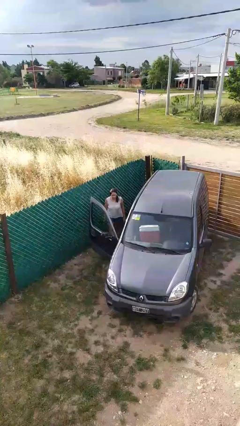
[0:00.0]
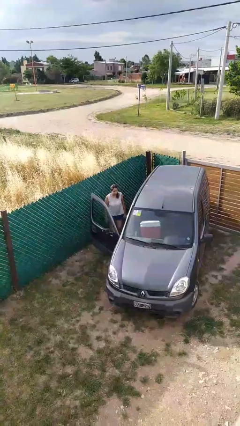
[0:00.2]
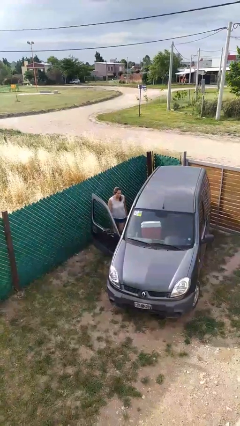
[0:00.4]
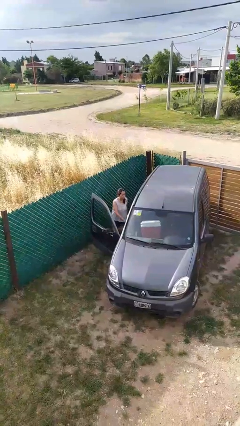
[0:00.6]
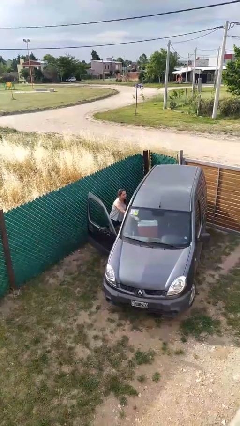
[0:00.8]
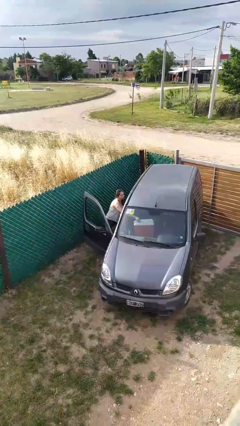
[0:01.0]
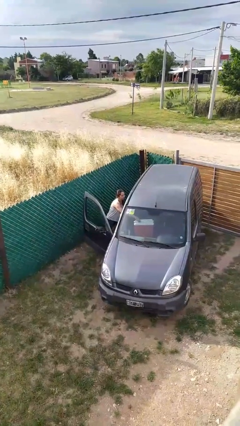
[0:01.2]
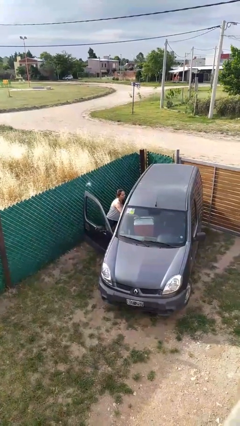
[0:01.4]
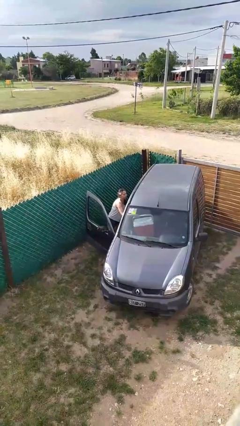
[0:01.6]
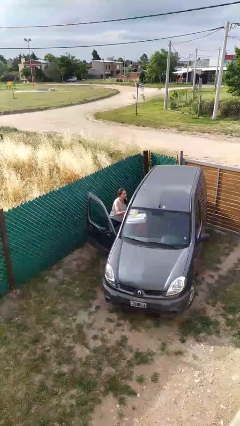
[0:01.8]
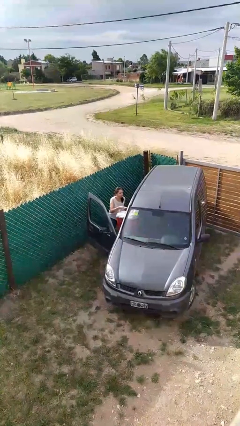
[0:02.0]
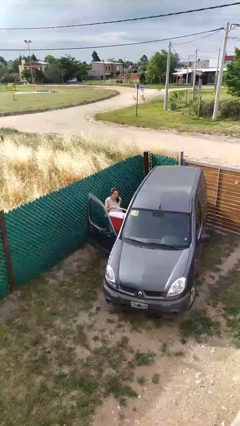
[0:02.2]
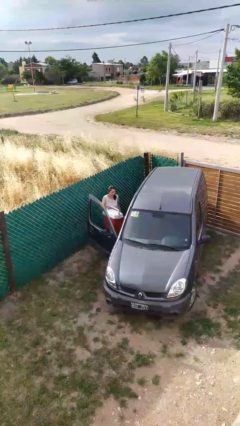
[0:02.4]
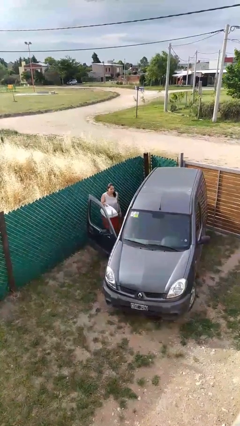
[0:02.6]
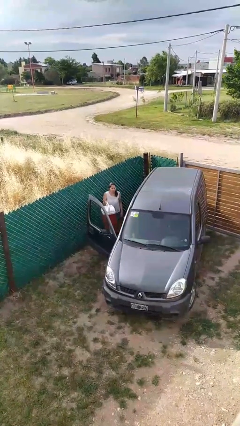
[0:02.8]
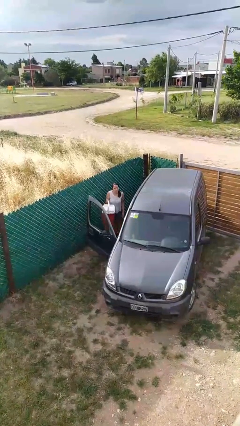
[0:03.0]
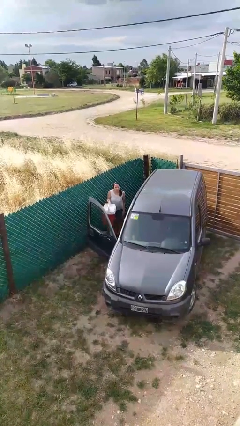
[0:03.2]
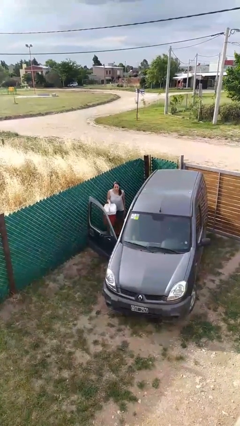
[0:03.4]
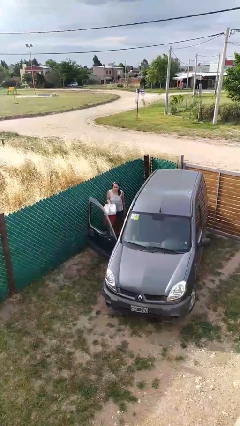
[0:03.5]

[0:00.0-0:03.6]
person unloads car

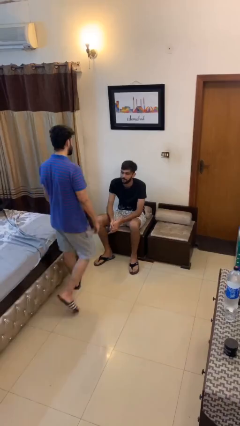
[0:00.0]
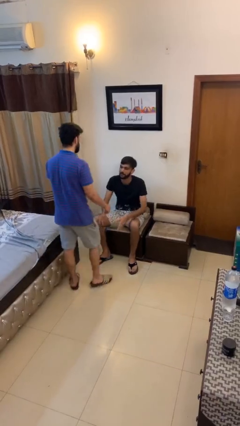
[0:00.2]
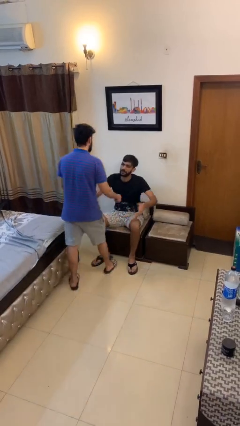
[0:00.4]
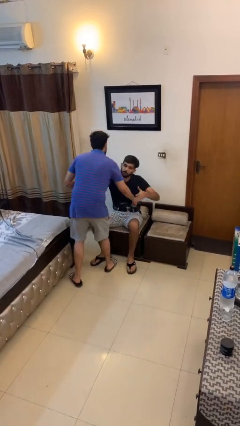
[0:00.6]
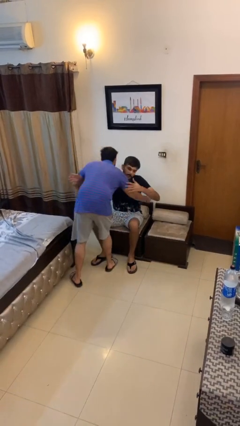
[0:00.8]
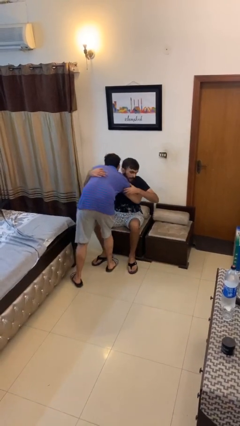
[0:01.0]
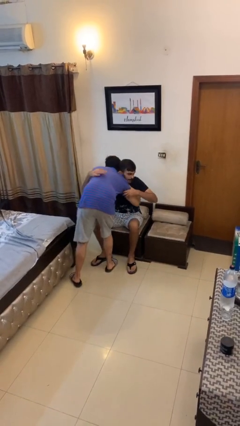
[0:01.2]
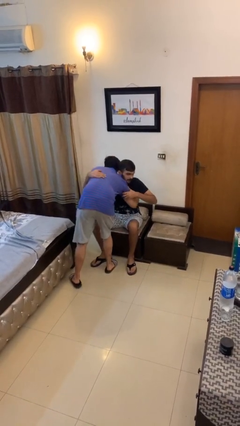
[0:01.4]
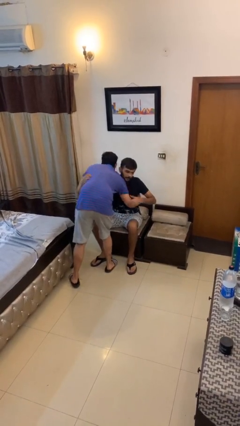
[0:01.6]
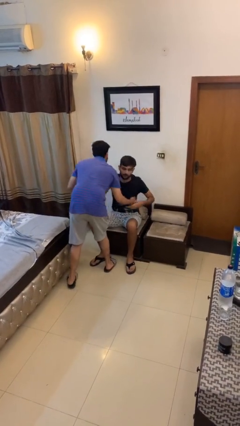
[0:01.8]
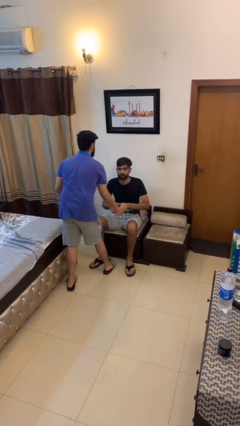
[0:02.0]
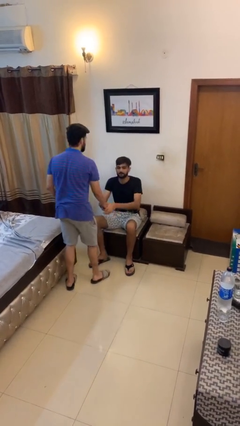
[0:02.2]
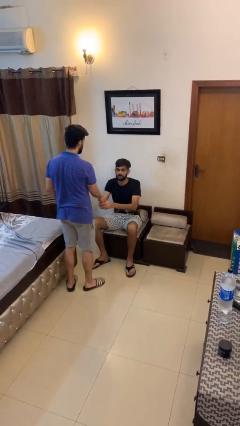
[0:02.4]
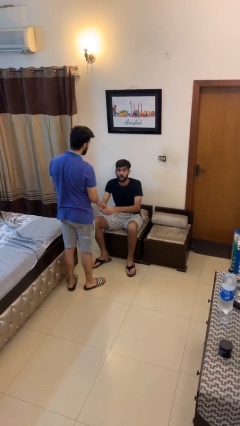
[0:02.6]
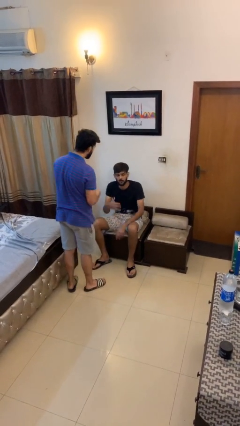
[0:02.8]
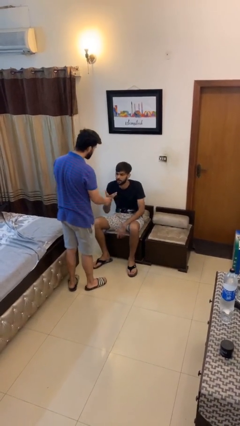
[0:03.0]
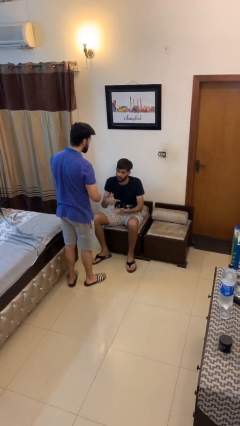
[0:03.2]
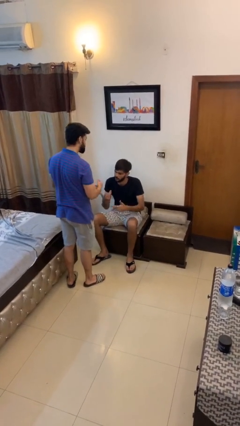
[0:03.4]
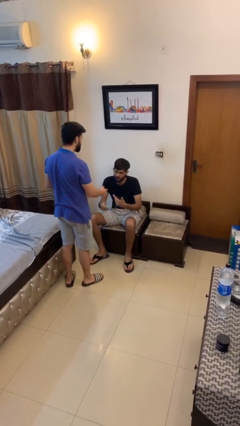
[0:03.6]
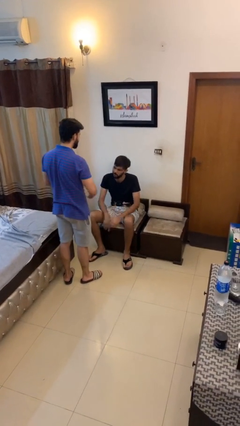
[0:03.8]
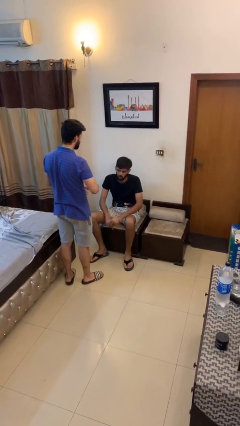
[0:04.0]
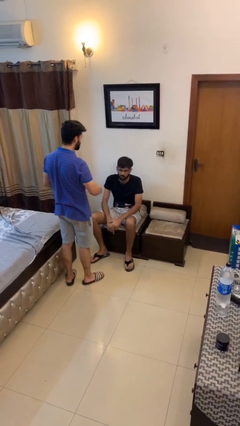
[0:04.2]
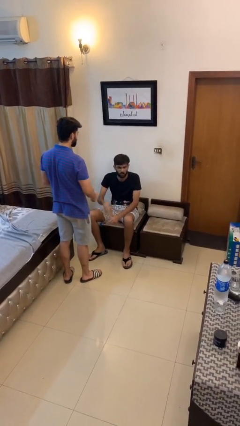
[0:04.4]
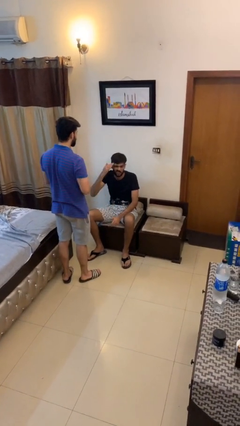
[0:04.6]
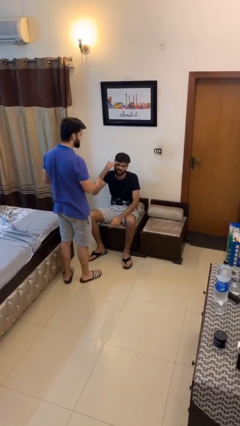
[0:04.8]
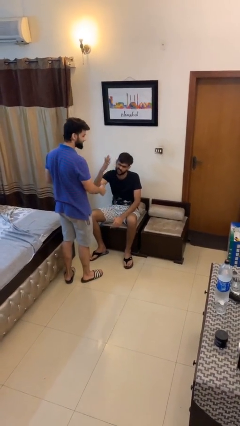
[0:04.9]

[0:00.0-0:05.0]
person embraces person

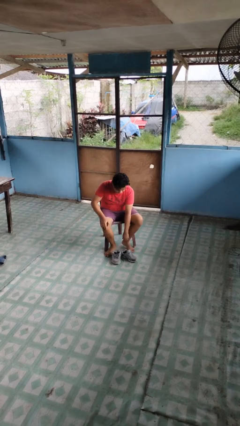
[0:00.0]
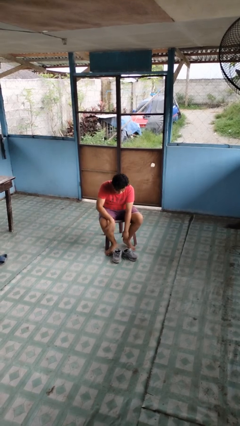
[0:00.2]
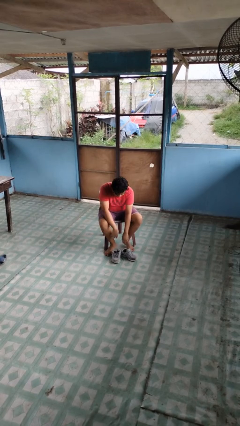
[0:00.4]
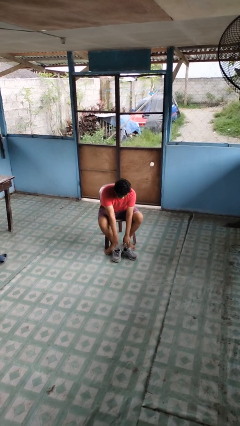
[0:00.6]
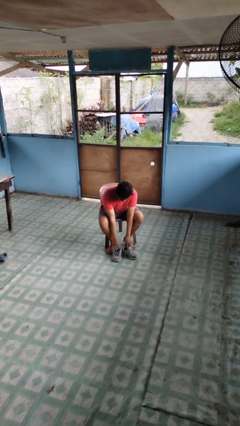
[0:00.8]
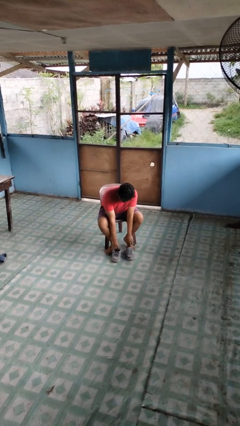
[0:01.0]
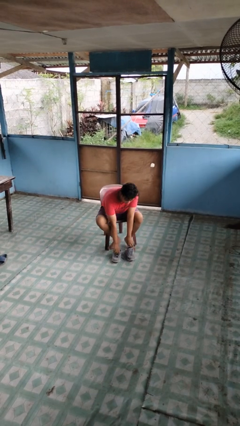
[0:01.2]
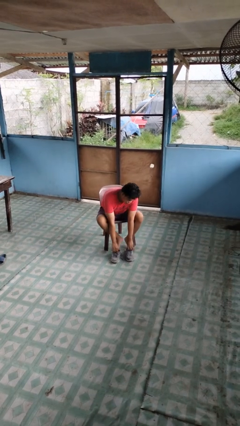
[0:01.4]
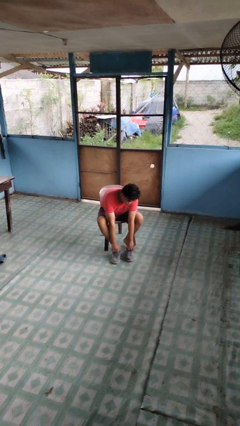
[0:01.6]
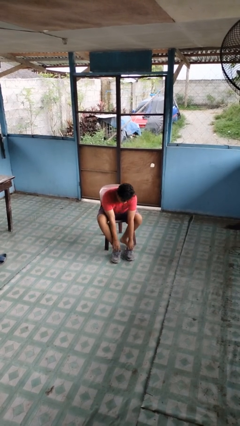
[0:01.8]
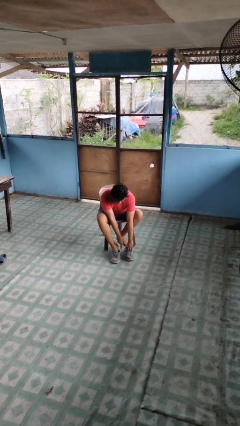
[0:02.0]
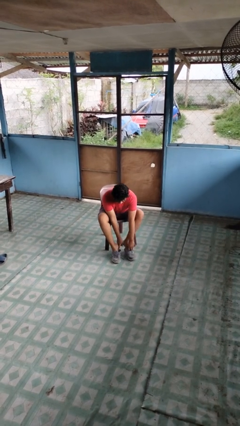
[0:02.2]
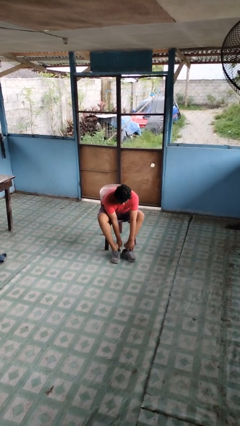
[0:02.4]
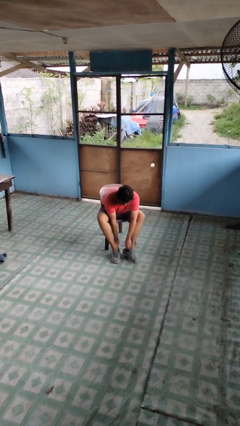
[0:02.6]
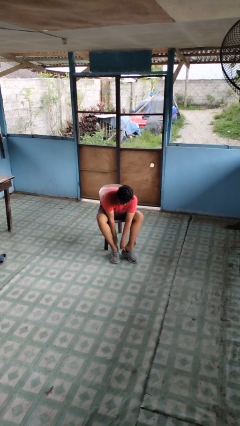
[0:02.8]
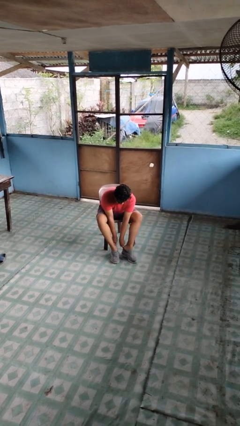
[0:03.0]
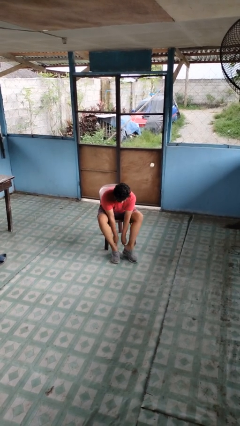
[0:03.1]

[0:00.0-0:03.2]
person puts on shoes

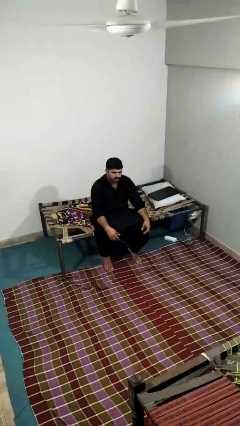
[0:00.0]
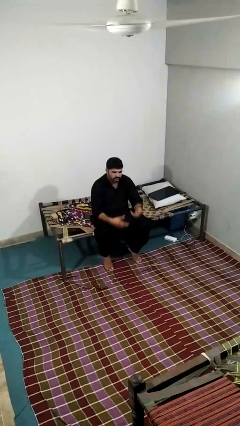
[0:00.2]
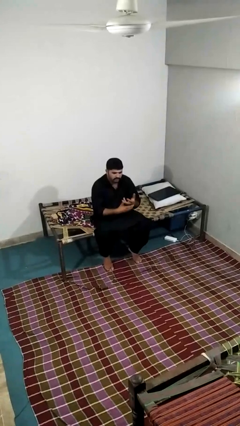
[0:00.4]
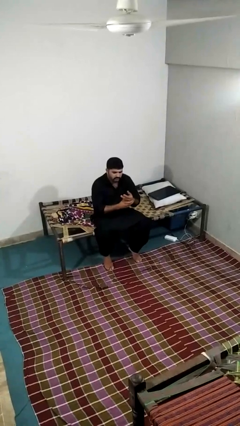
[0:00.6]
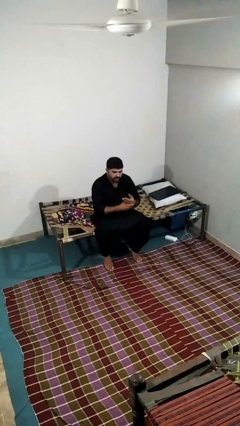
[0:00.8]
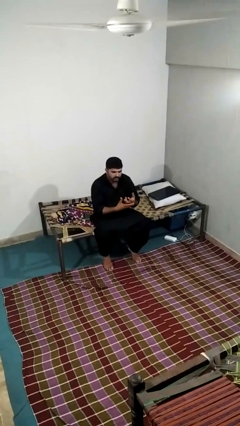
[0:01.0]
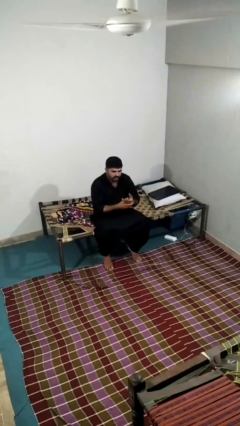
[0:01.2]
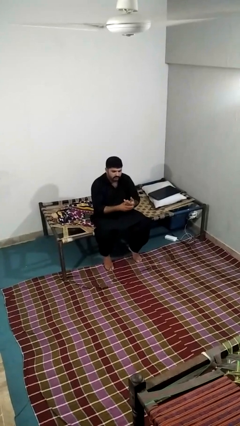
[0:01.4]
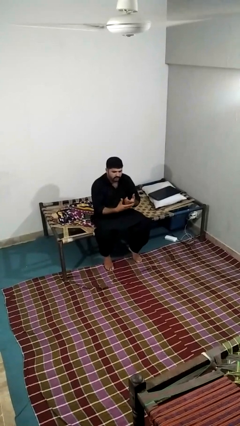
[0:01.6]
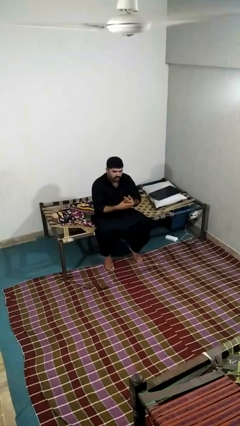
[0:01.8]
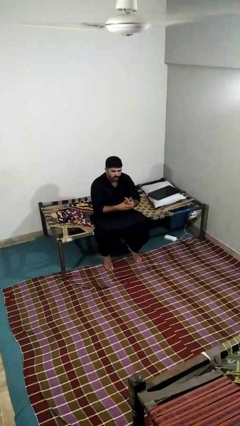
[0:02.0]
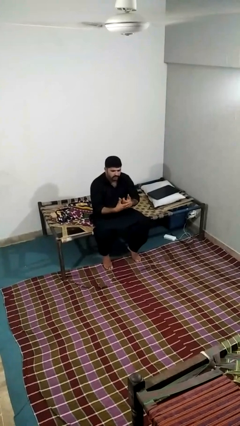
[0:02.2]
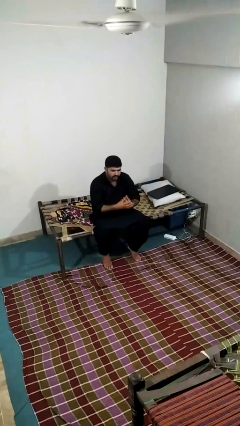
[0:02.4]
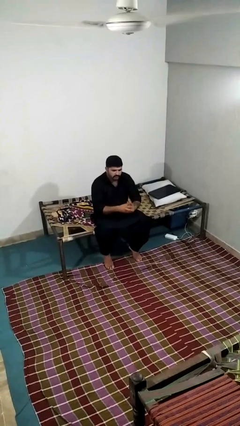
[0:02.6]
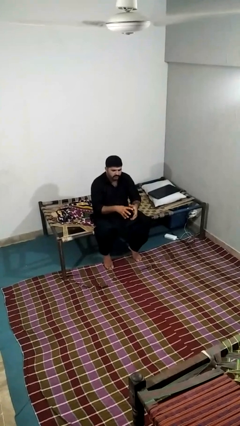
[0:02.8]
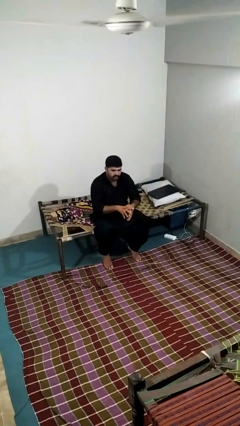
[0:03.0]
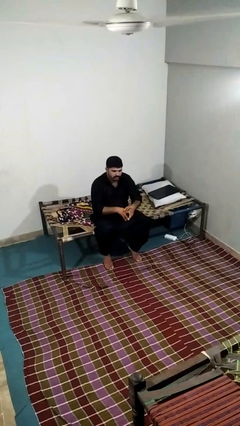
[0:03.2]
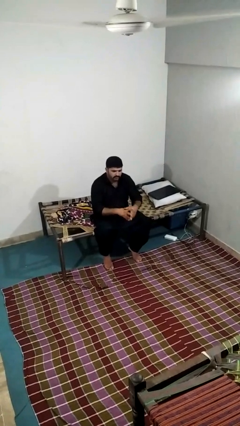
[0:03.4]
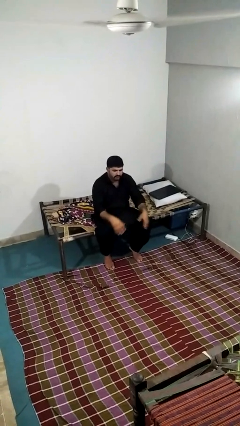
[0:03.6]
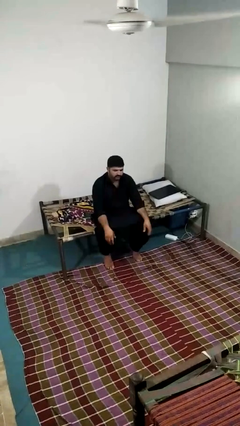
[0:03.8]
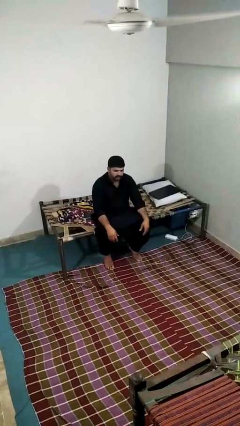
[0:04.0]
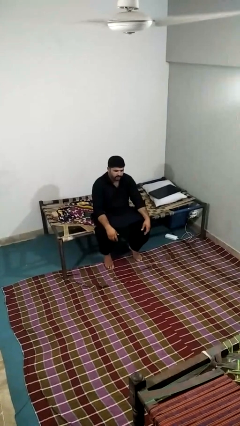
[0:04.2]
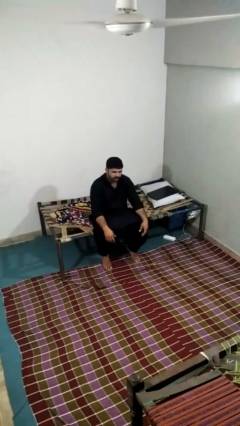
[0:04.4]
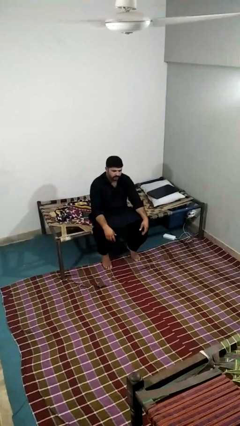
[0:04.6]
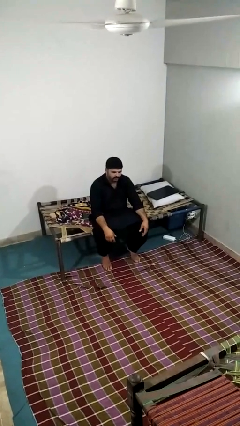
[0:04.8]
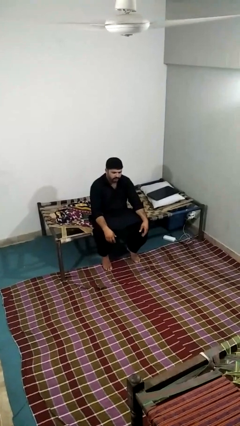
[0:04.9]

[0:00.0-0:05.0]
person cracks knuckles

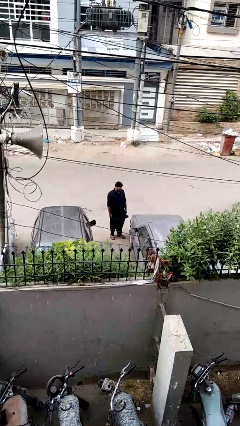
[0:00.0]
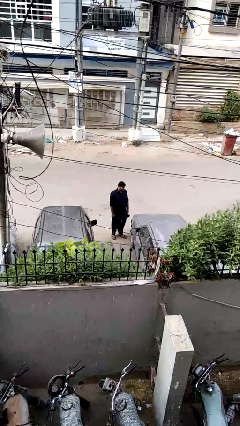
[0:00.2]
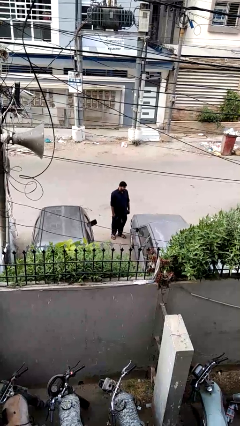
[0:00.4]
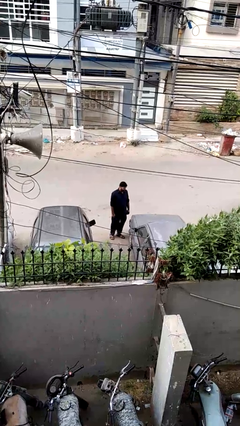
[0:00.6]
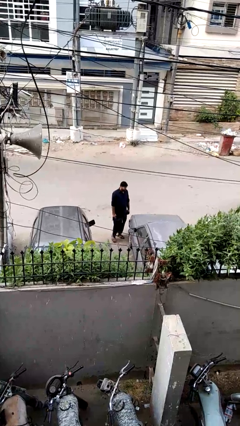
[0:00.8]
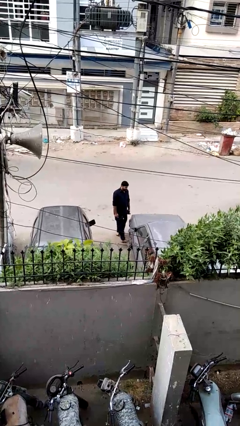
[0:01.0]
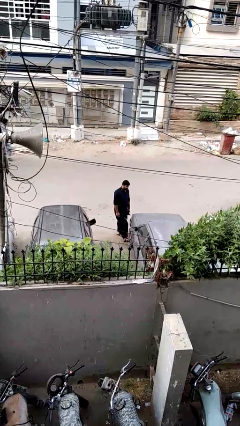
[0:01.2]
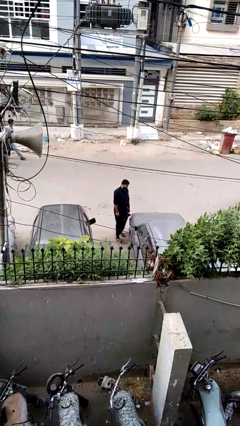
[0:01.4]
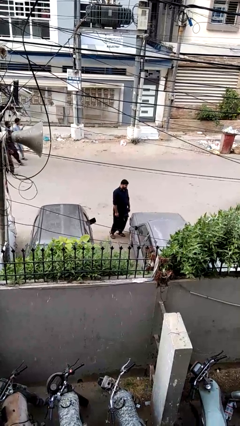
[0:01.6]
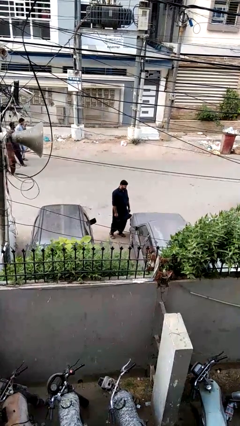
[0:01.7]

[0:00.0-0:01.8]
person kicks car tires
